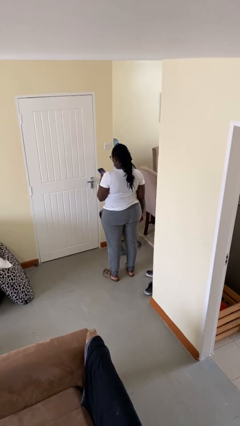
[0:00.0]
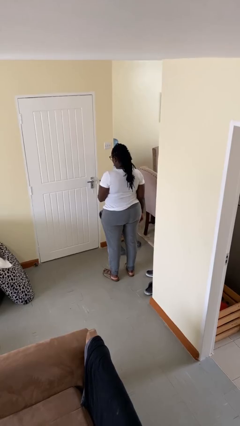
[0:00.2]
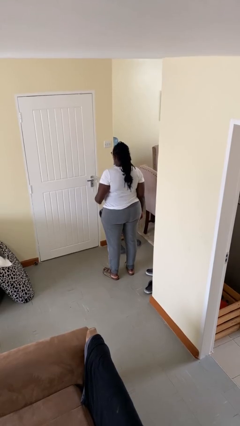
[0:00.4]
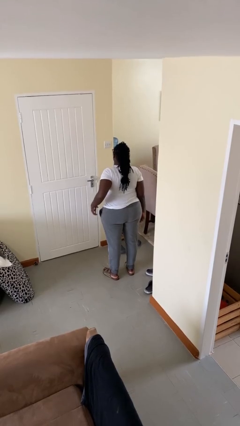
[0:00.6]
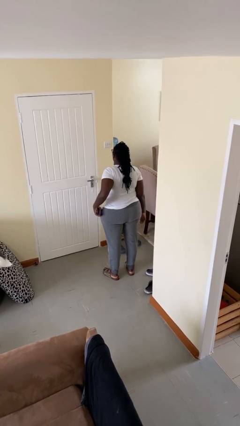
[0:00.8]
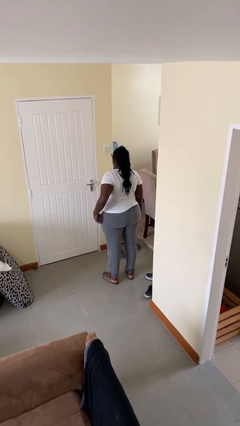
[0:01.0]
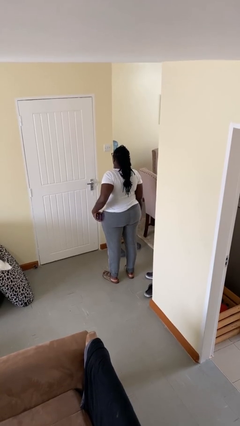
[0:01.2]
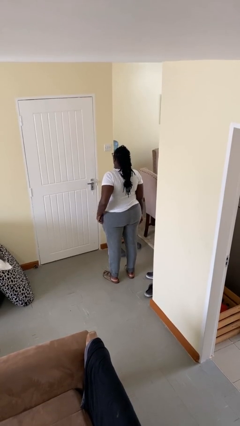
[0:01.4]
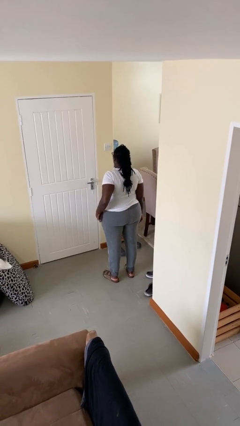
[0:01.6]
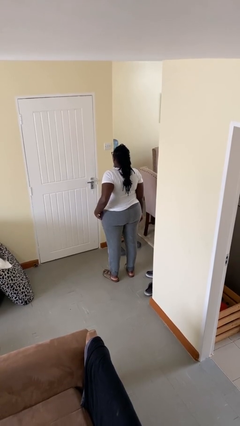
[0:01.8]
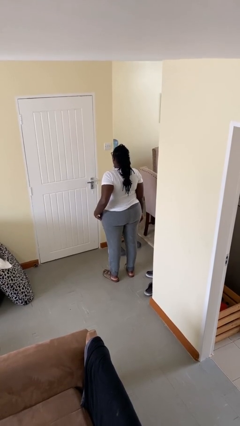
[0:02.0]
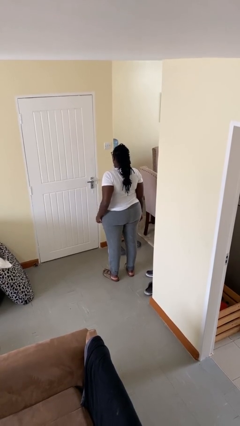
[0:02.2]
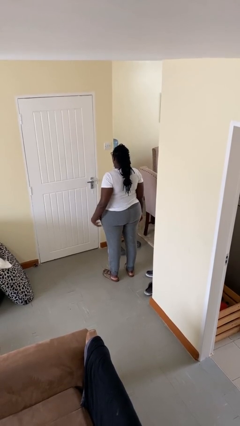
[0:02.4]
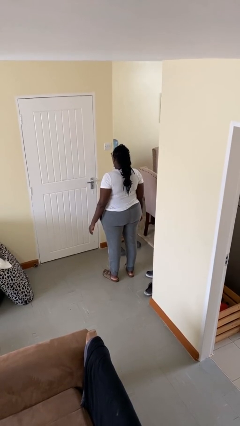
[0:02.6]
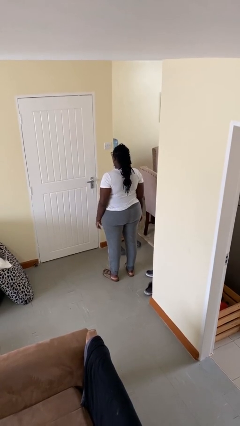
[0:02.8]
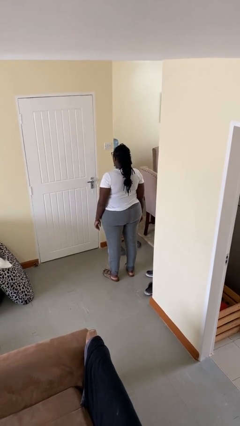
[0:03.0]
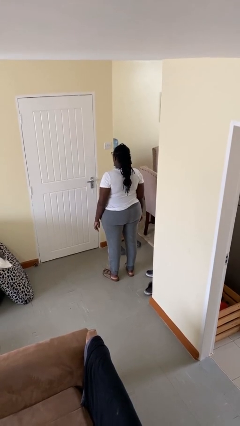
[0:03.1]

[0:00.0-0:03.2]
person puts phone into pocket

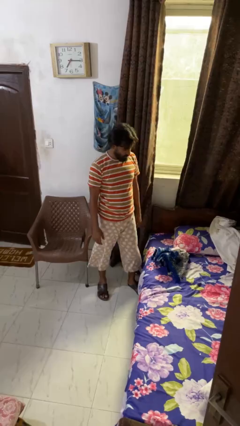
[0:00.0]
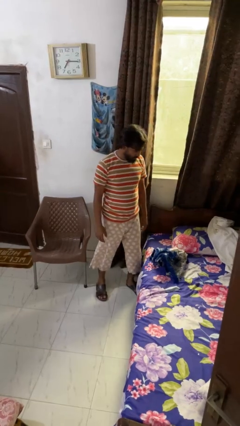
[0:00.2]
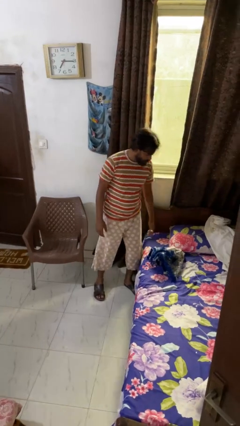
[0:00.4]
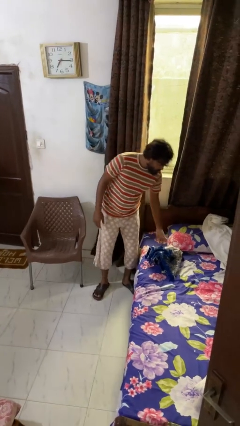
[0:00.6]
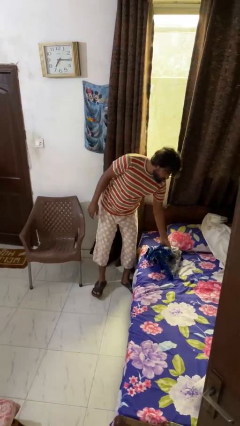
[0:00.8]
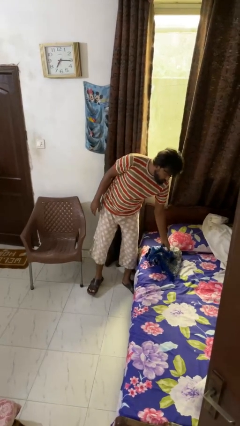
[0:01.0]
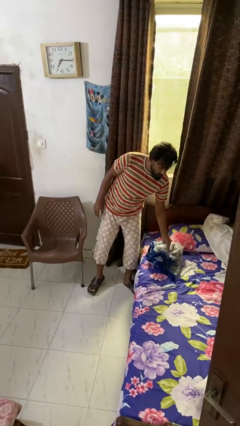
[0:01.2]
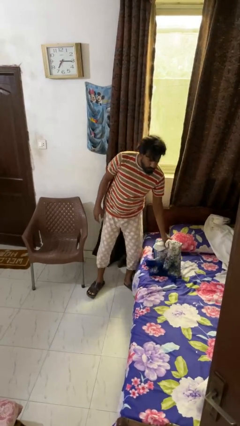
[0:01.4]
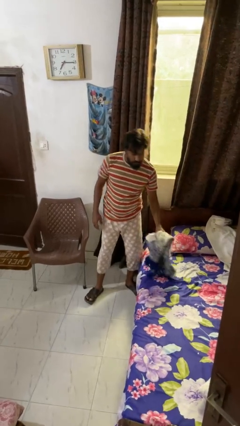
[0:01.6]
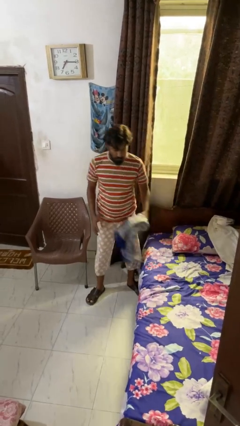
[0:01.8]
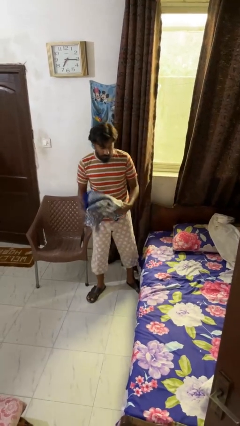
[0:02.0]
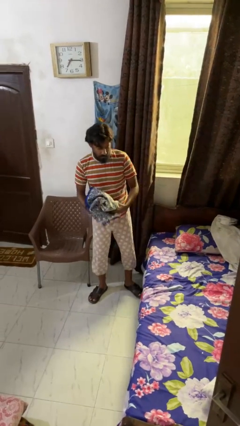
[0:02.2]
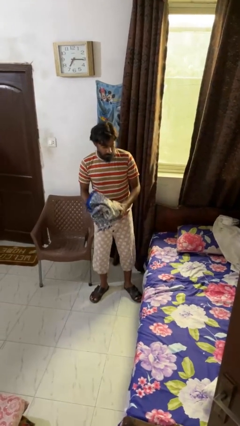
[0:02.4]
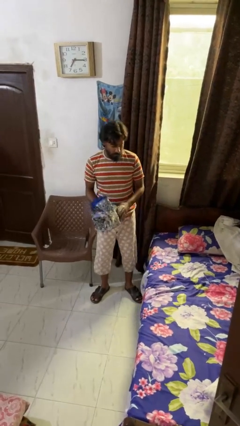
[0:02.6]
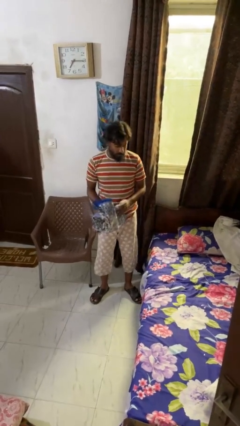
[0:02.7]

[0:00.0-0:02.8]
person picks up object from bed

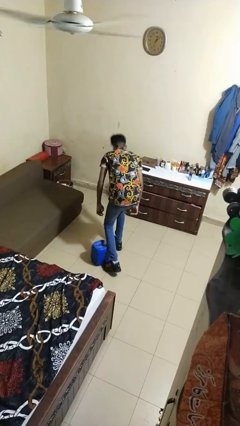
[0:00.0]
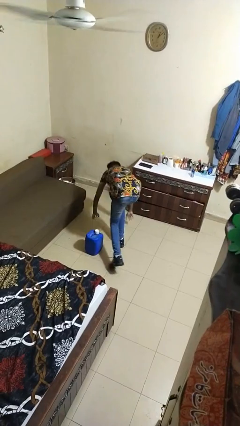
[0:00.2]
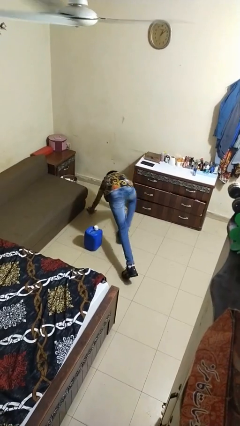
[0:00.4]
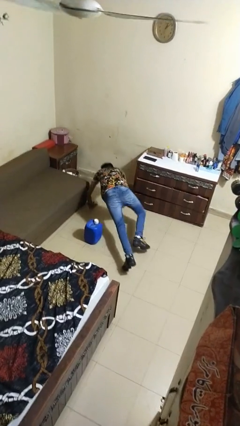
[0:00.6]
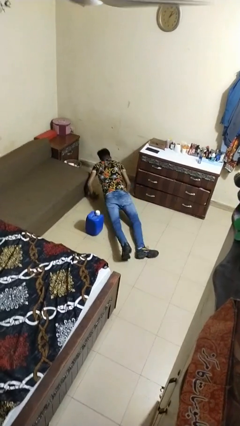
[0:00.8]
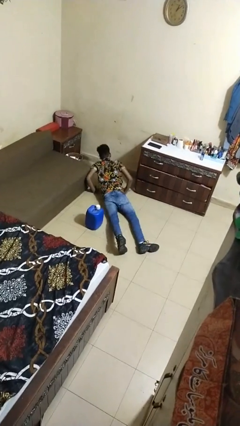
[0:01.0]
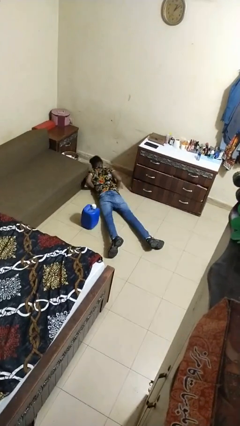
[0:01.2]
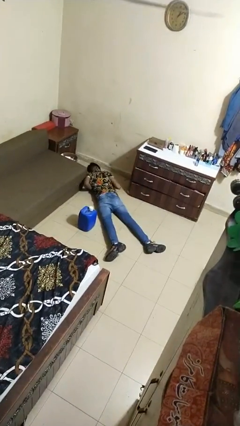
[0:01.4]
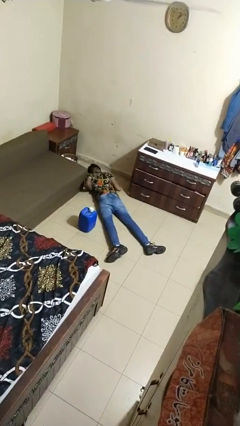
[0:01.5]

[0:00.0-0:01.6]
person lies down on floor

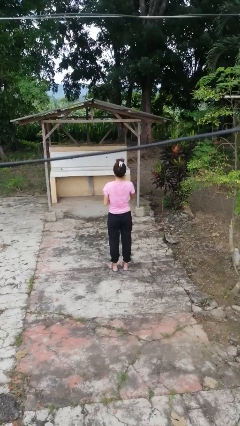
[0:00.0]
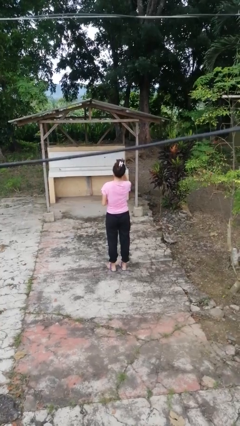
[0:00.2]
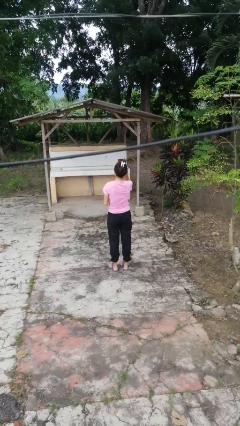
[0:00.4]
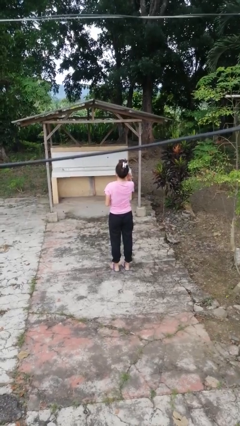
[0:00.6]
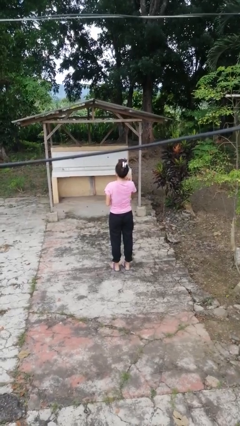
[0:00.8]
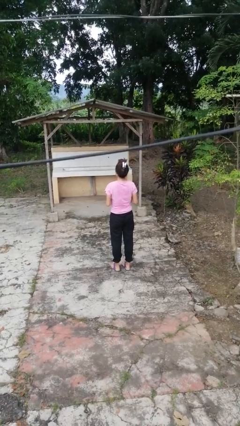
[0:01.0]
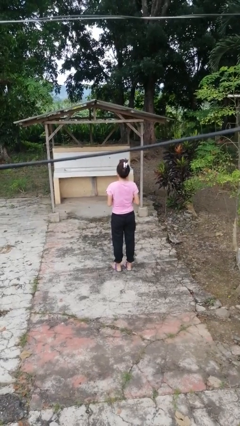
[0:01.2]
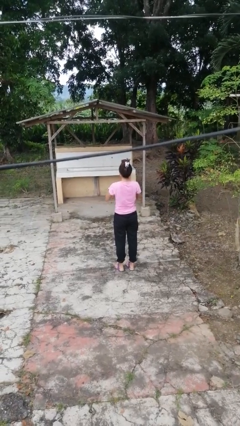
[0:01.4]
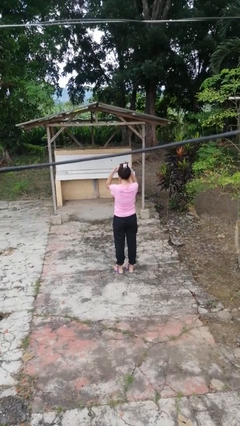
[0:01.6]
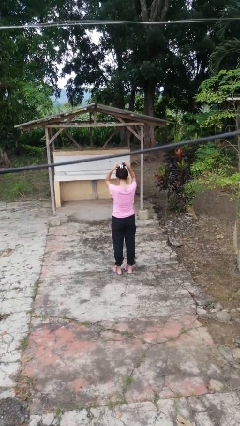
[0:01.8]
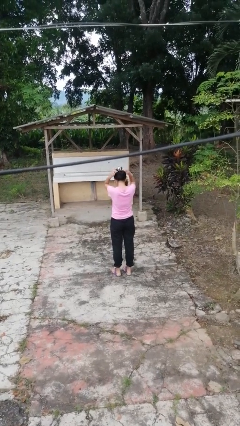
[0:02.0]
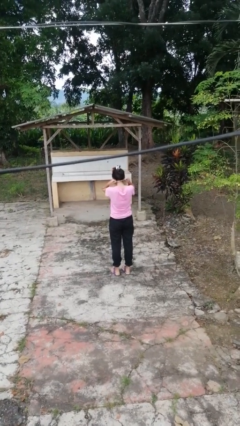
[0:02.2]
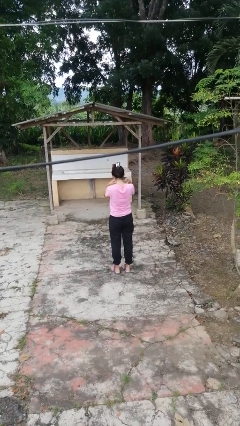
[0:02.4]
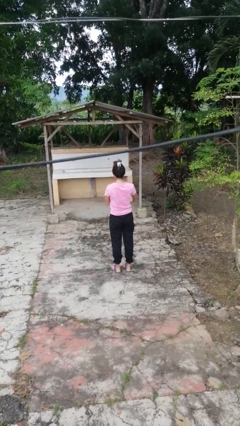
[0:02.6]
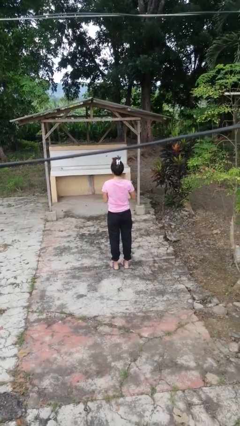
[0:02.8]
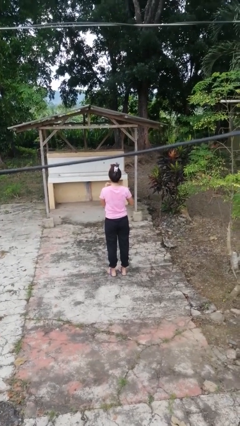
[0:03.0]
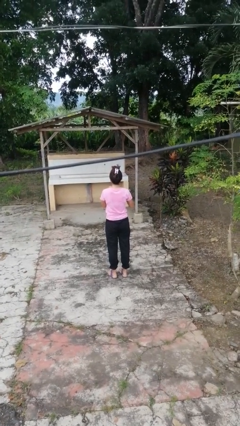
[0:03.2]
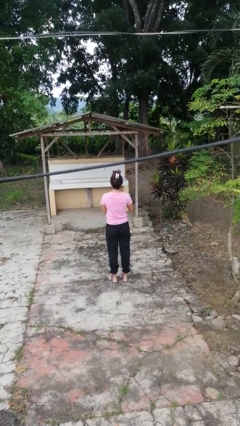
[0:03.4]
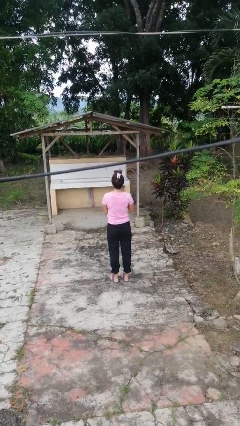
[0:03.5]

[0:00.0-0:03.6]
person puts on necklace

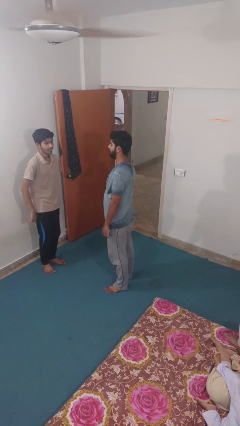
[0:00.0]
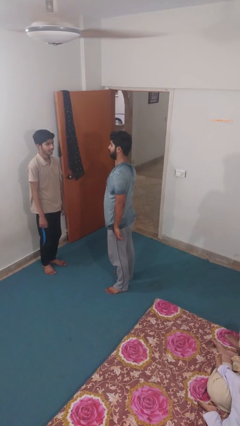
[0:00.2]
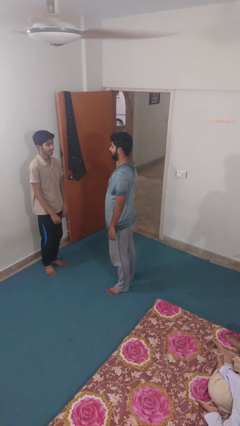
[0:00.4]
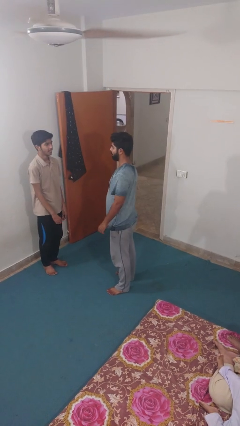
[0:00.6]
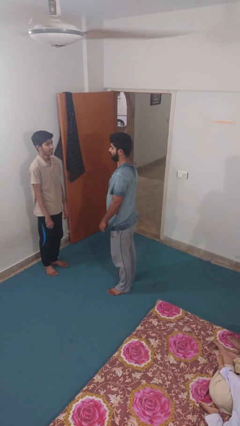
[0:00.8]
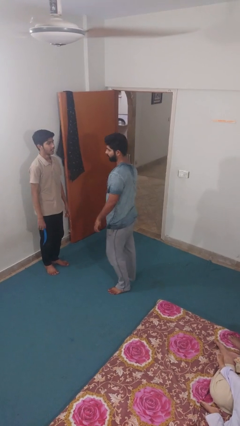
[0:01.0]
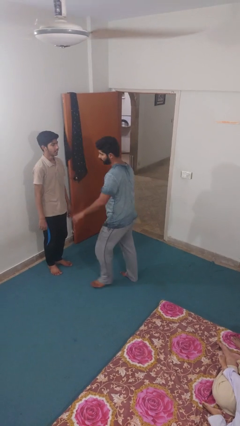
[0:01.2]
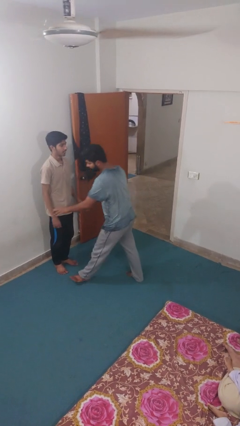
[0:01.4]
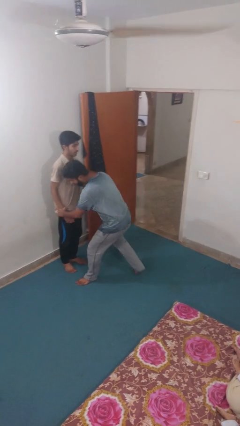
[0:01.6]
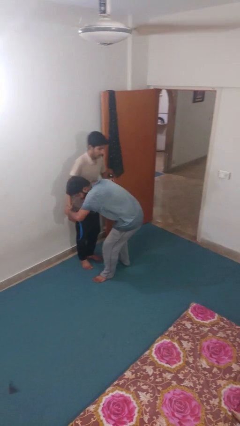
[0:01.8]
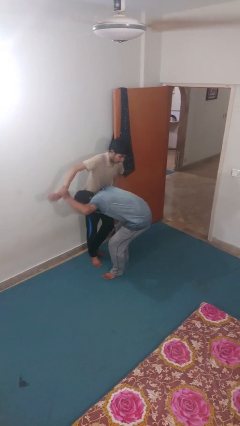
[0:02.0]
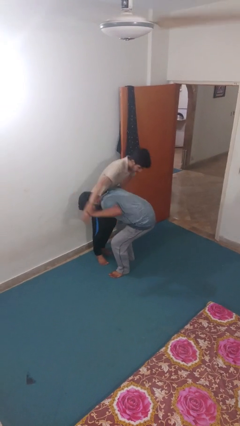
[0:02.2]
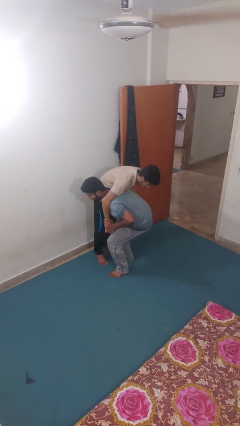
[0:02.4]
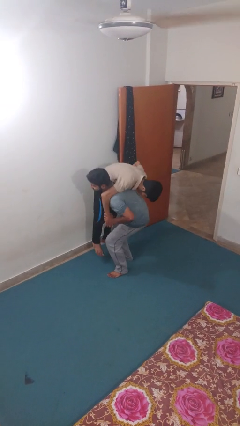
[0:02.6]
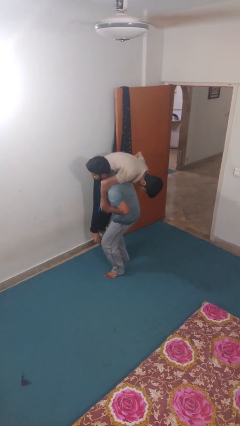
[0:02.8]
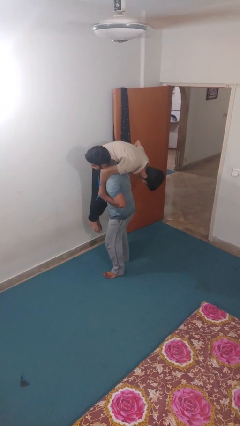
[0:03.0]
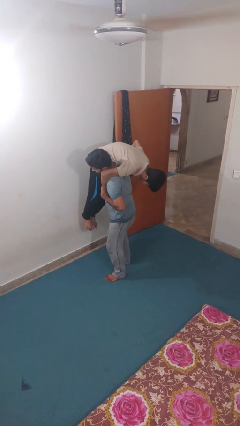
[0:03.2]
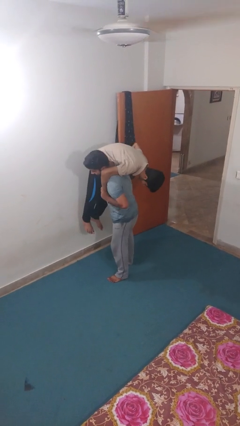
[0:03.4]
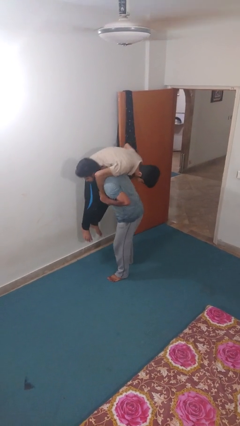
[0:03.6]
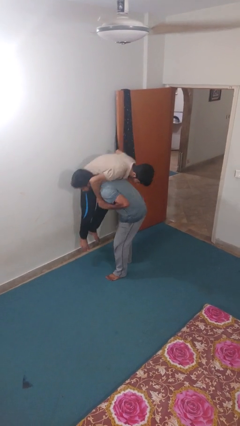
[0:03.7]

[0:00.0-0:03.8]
person carries person over shoulder

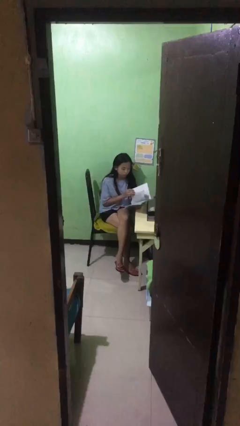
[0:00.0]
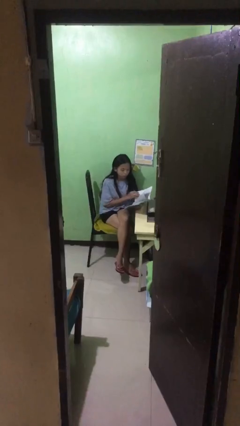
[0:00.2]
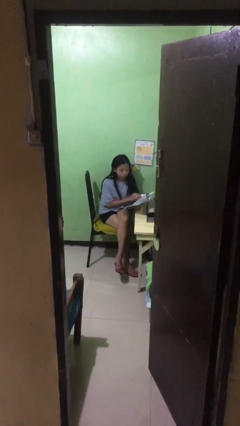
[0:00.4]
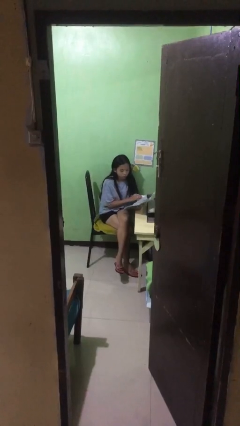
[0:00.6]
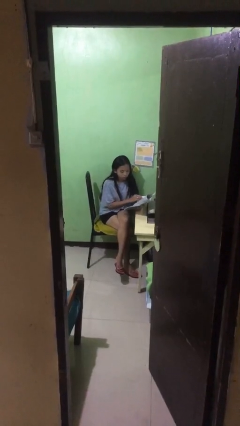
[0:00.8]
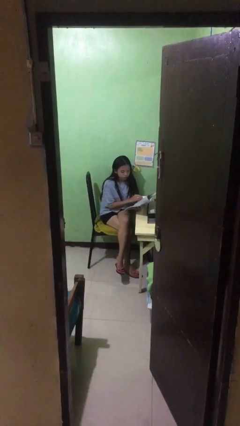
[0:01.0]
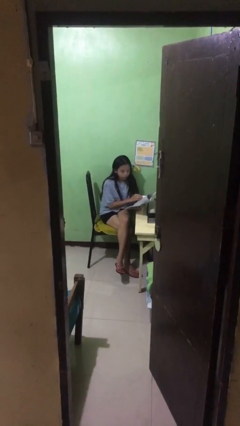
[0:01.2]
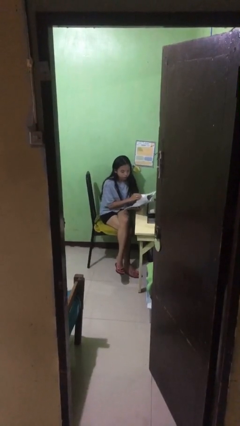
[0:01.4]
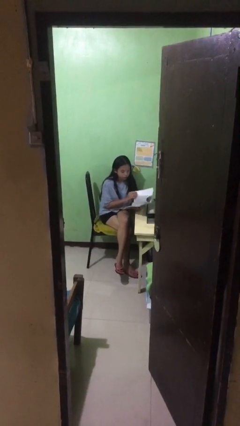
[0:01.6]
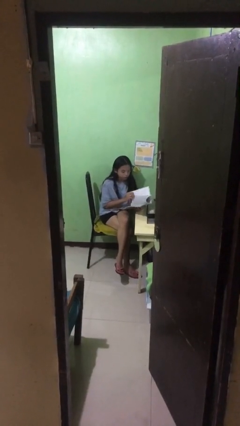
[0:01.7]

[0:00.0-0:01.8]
person reads document

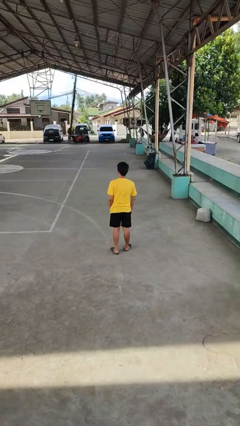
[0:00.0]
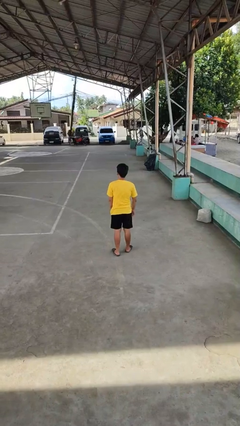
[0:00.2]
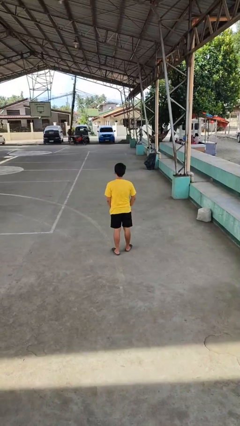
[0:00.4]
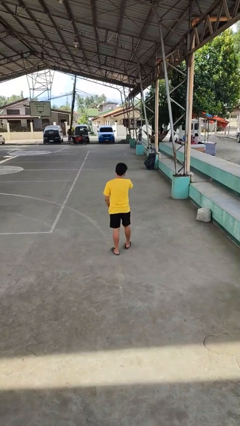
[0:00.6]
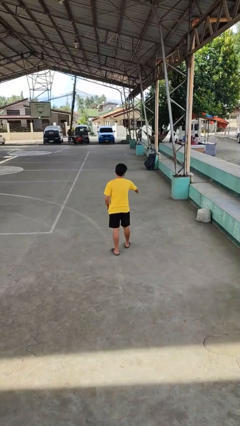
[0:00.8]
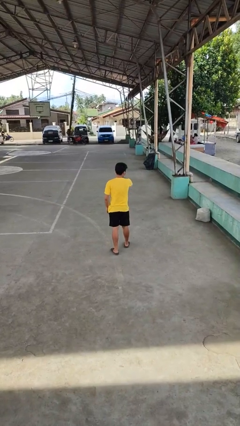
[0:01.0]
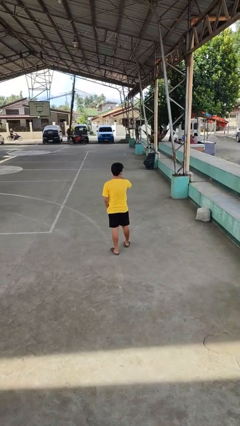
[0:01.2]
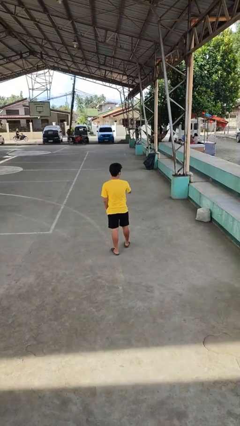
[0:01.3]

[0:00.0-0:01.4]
person karate chop
